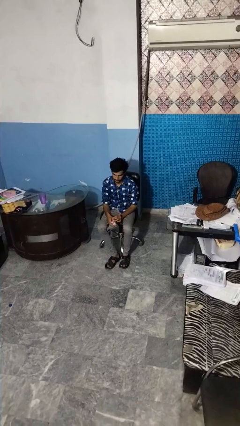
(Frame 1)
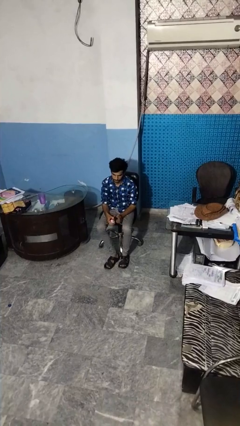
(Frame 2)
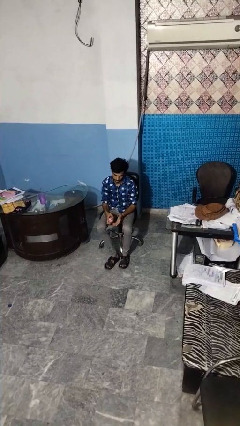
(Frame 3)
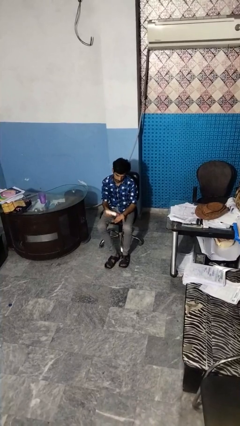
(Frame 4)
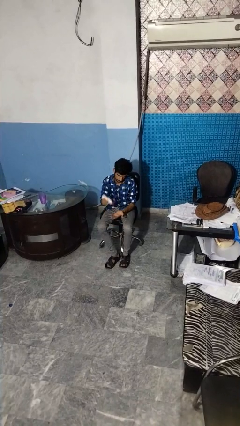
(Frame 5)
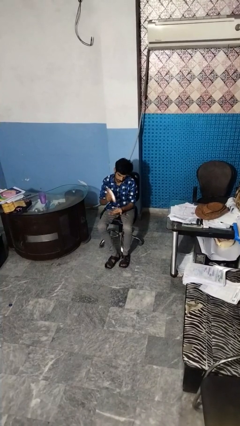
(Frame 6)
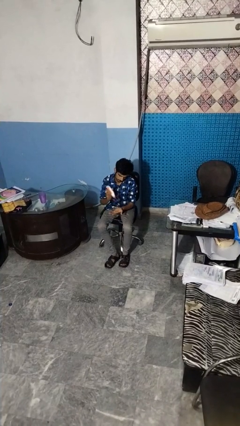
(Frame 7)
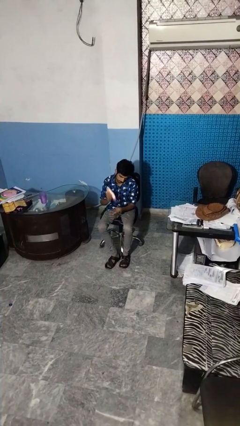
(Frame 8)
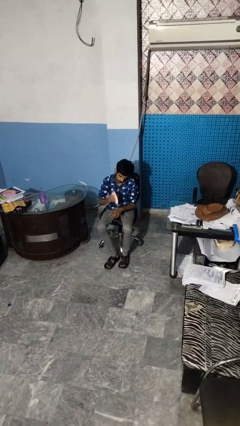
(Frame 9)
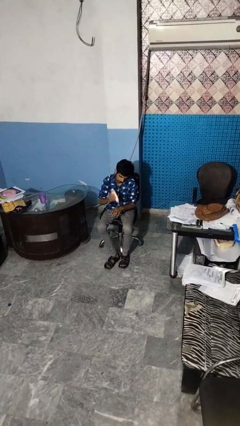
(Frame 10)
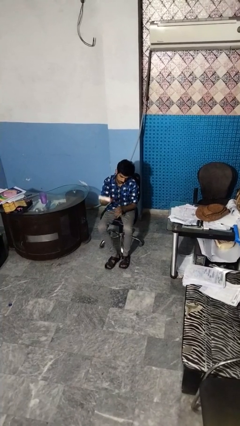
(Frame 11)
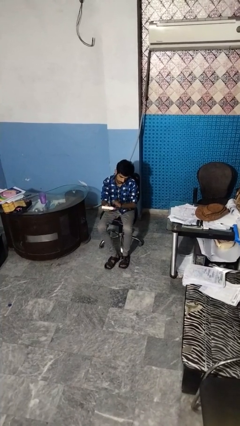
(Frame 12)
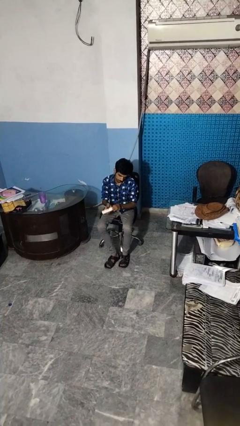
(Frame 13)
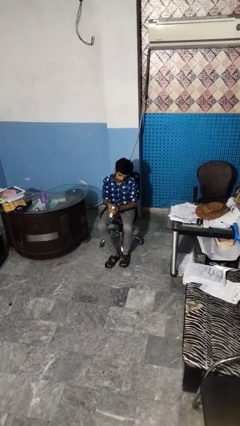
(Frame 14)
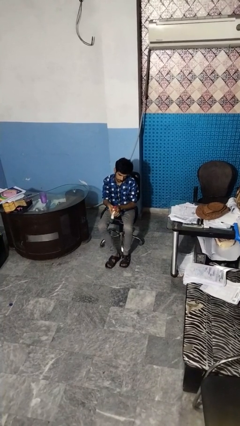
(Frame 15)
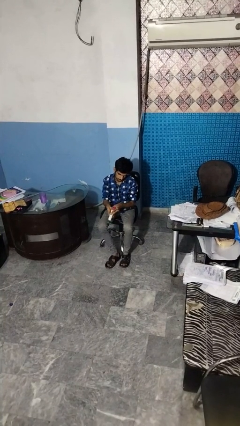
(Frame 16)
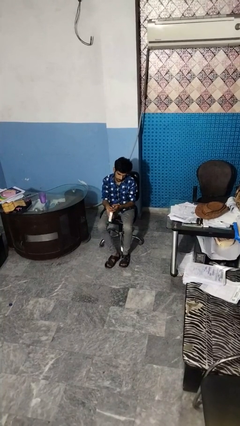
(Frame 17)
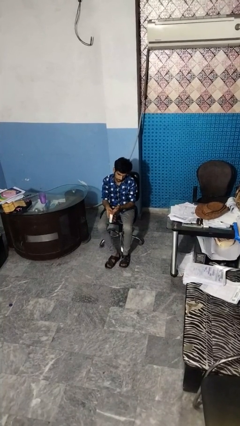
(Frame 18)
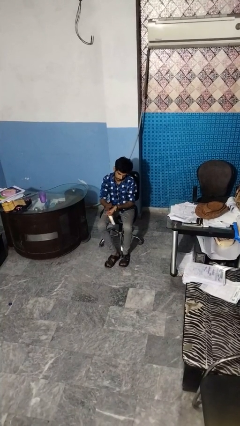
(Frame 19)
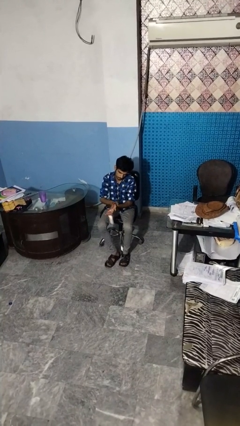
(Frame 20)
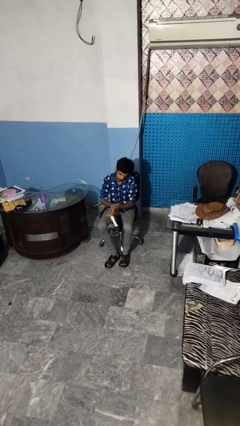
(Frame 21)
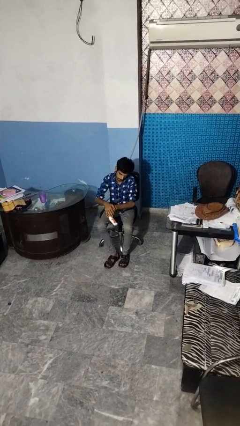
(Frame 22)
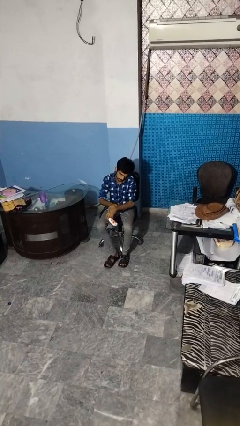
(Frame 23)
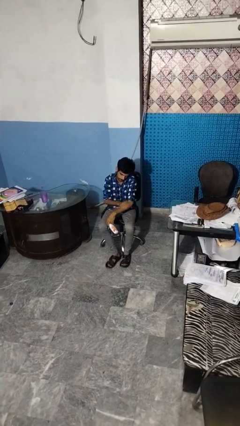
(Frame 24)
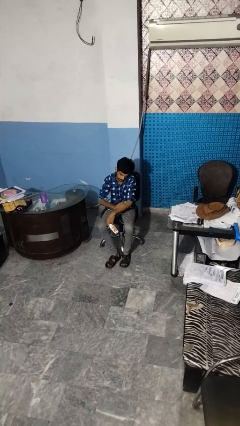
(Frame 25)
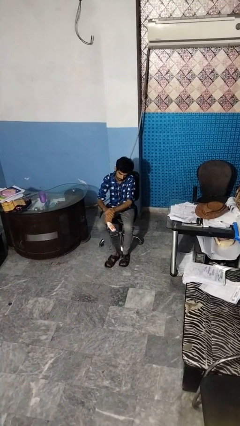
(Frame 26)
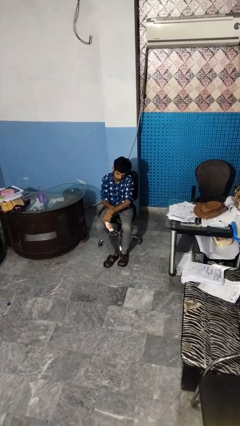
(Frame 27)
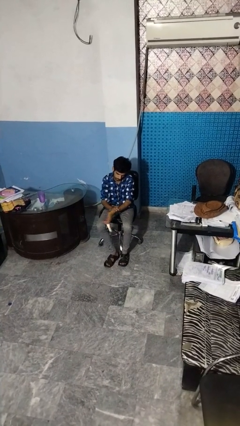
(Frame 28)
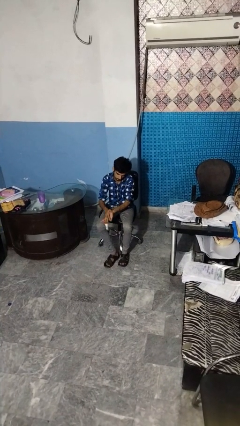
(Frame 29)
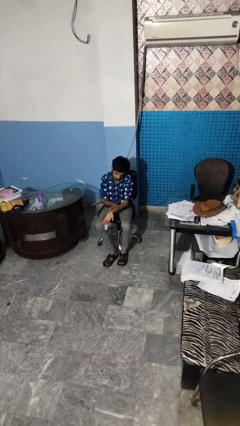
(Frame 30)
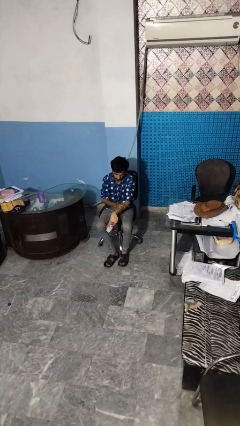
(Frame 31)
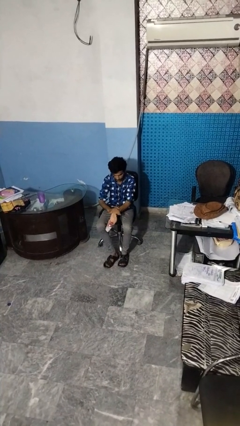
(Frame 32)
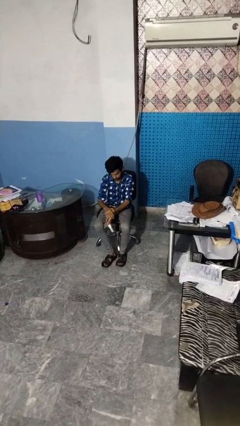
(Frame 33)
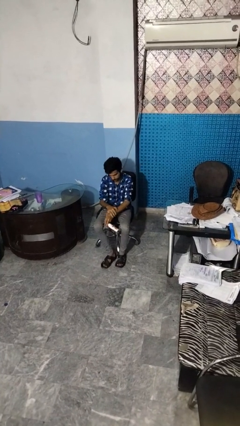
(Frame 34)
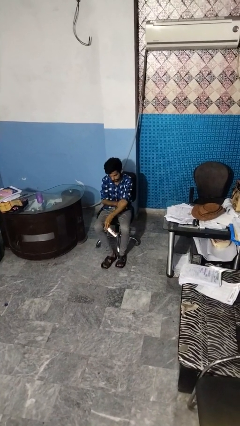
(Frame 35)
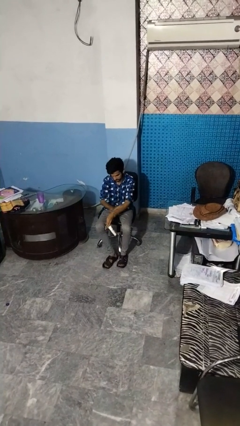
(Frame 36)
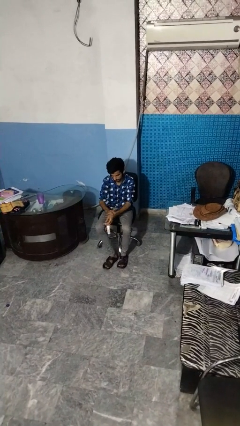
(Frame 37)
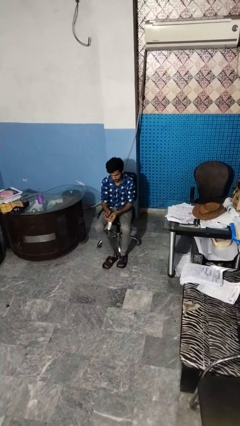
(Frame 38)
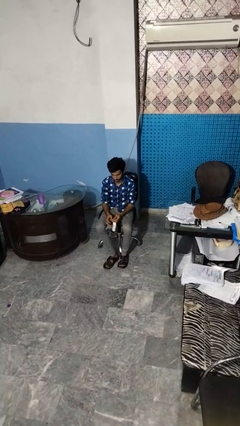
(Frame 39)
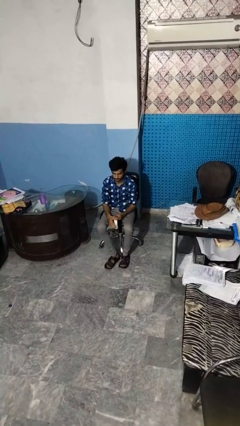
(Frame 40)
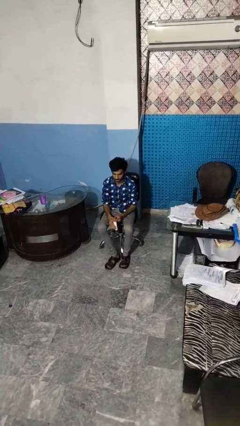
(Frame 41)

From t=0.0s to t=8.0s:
person applies sunscreen

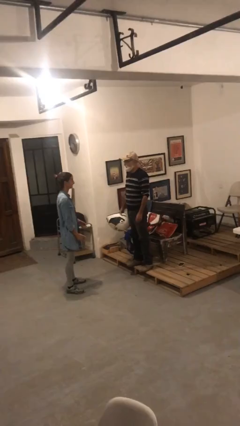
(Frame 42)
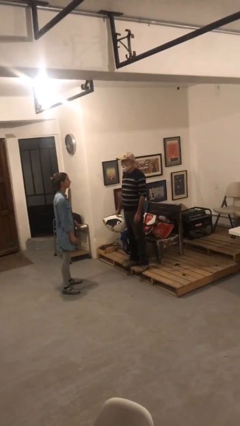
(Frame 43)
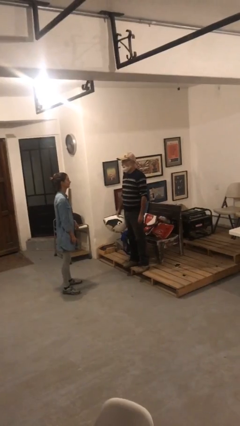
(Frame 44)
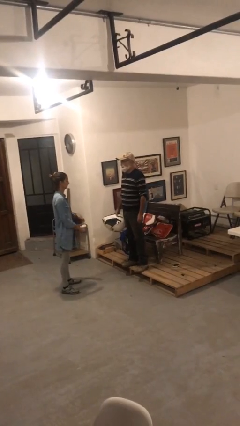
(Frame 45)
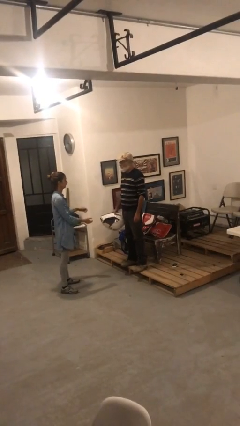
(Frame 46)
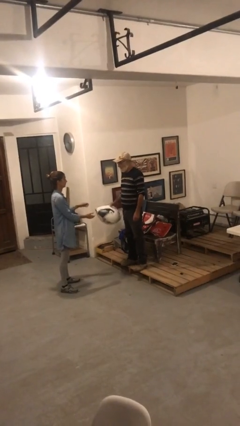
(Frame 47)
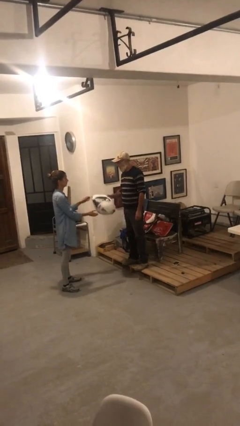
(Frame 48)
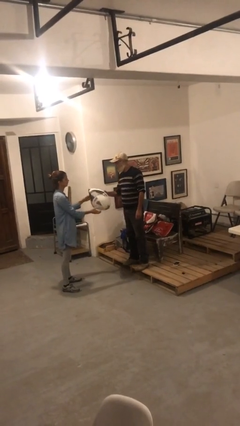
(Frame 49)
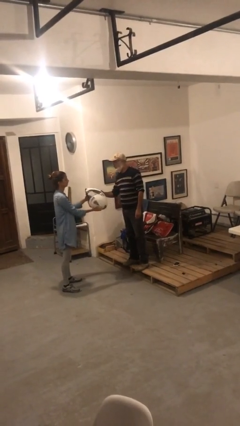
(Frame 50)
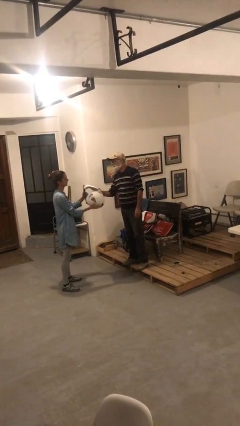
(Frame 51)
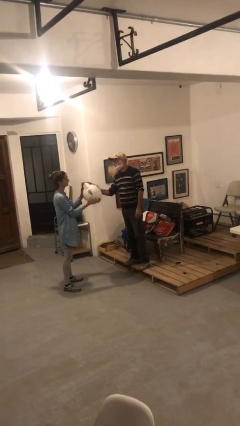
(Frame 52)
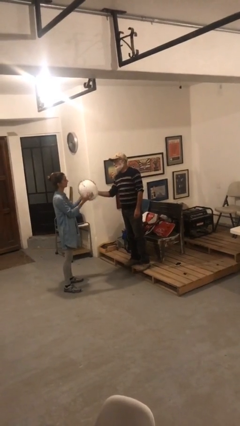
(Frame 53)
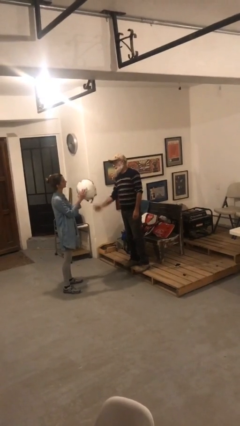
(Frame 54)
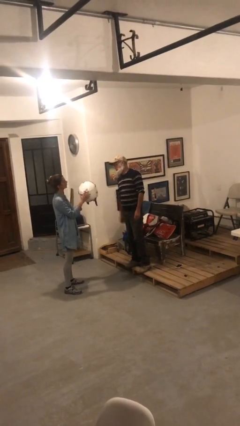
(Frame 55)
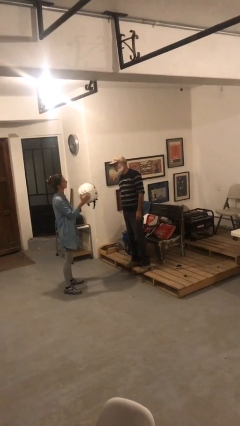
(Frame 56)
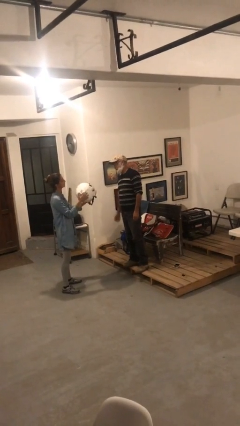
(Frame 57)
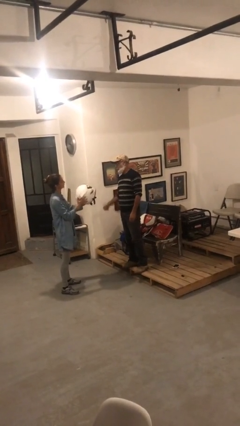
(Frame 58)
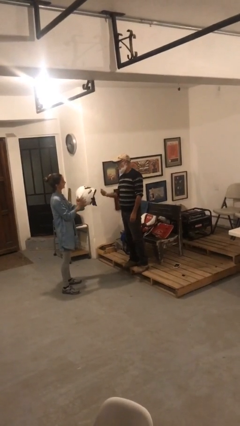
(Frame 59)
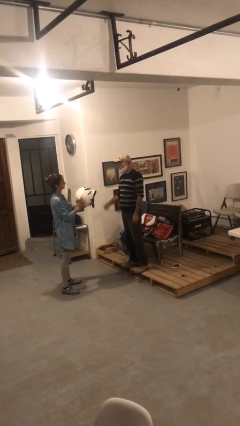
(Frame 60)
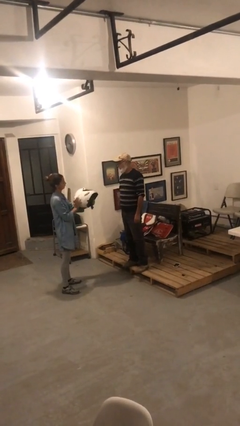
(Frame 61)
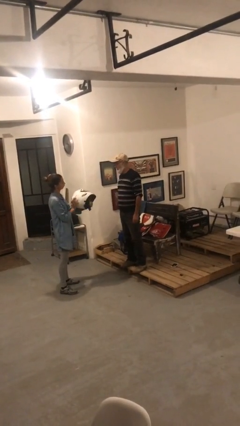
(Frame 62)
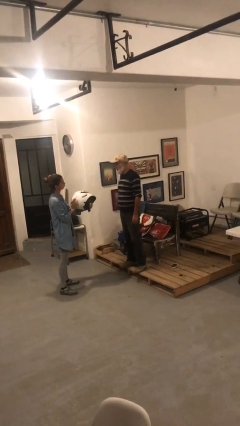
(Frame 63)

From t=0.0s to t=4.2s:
person transfers object to person

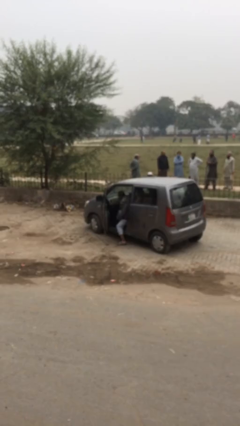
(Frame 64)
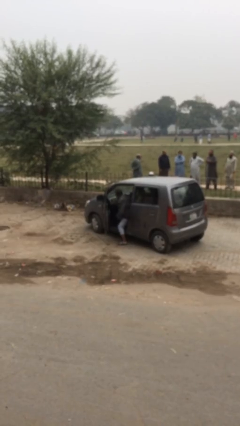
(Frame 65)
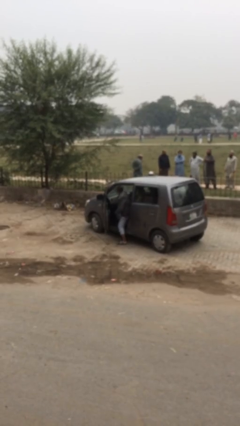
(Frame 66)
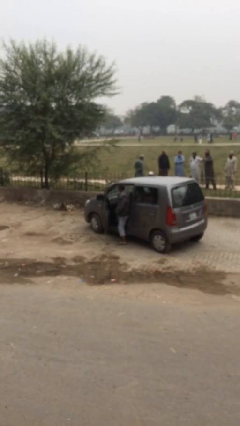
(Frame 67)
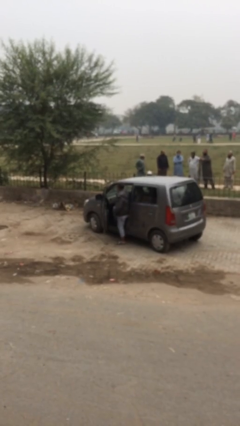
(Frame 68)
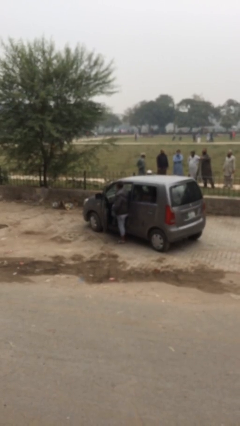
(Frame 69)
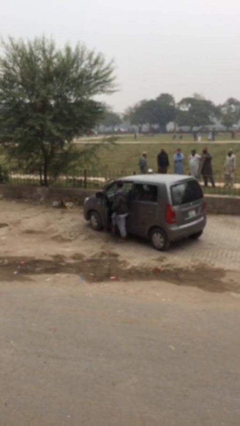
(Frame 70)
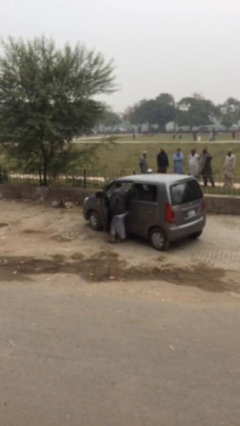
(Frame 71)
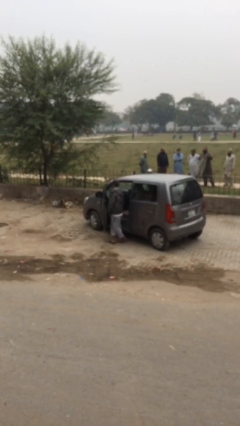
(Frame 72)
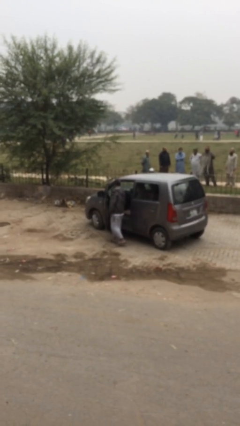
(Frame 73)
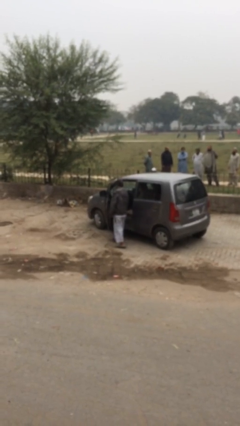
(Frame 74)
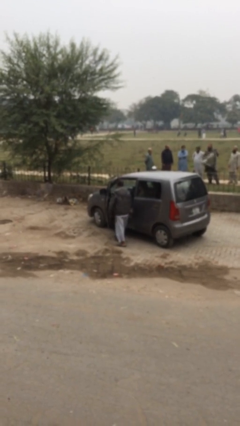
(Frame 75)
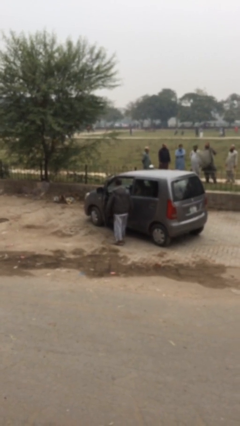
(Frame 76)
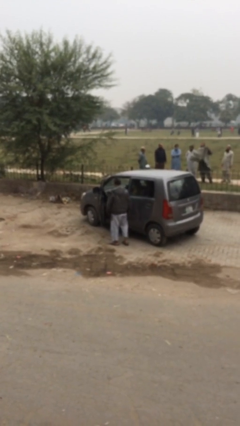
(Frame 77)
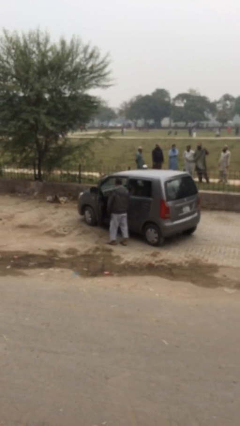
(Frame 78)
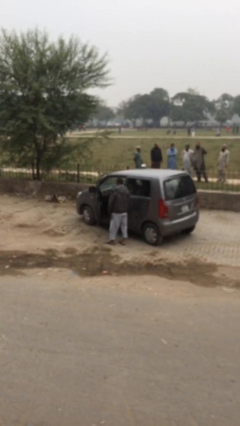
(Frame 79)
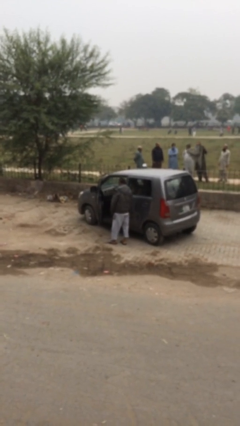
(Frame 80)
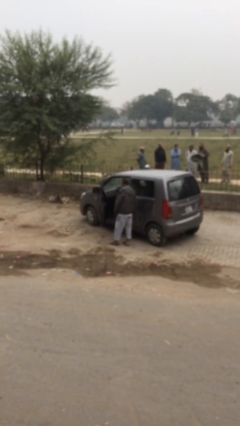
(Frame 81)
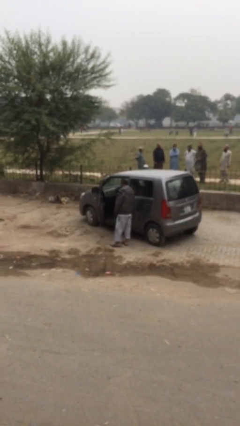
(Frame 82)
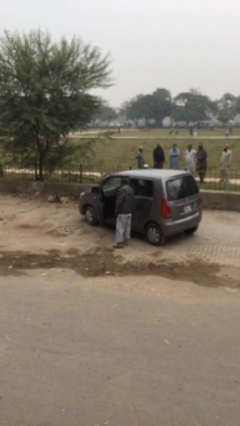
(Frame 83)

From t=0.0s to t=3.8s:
person exits car

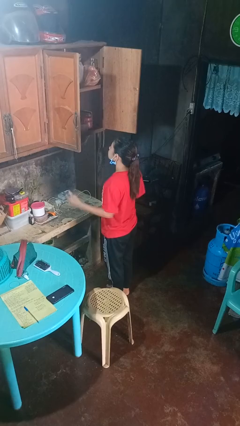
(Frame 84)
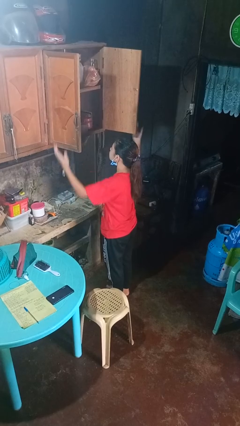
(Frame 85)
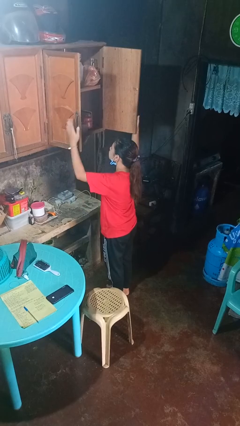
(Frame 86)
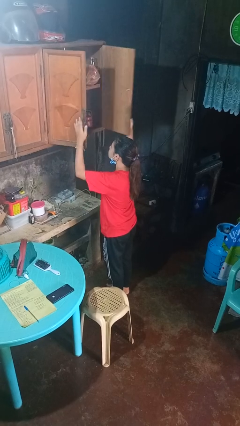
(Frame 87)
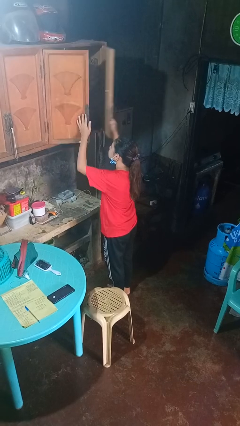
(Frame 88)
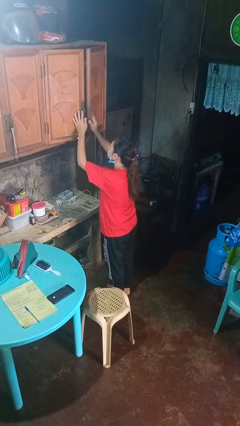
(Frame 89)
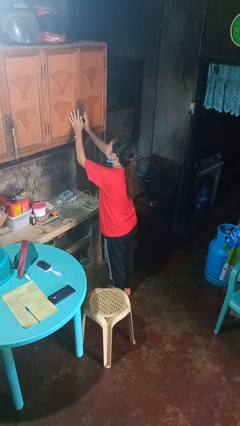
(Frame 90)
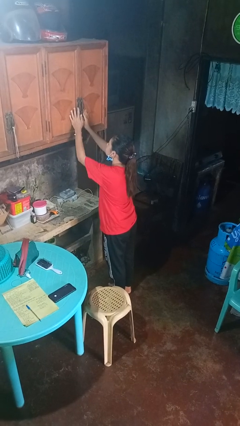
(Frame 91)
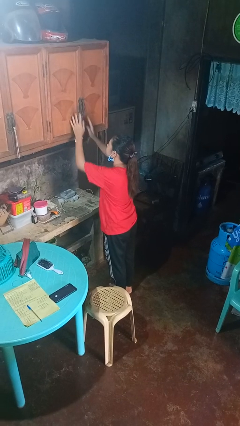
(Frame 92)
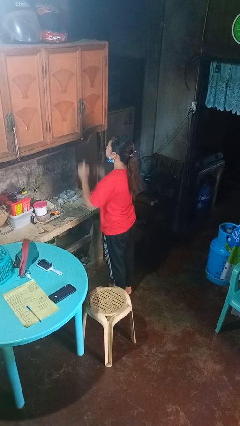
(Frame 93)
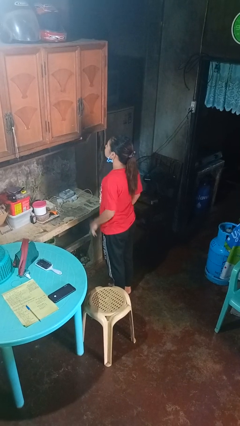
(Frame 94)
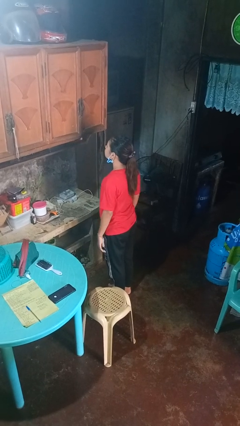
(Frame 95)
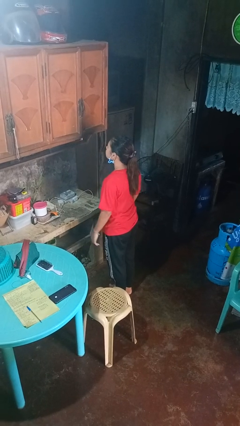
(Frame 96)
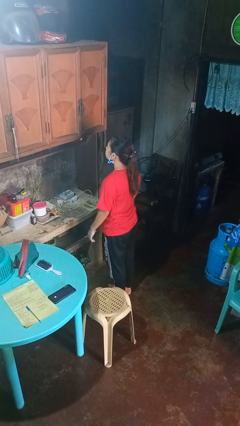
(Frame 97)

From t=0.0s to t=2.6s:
person closes cabinet
